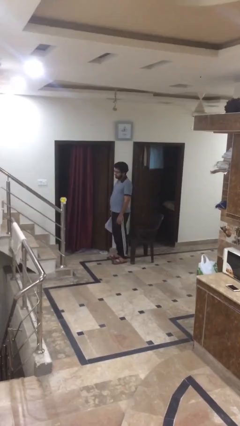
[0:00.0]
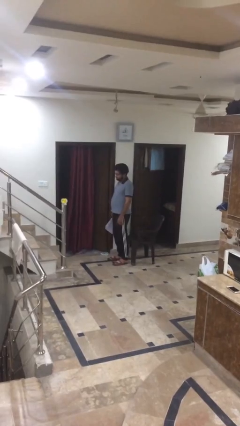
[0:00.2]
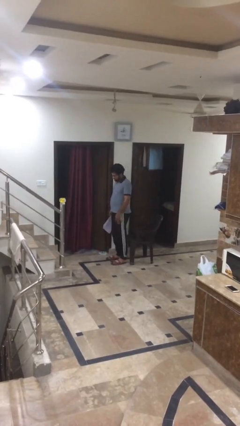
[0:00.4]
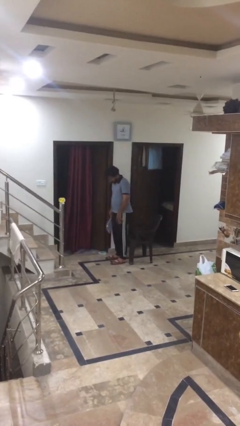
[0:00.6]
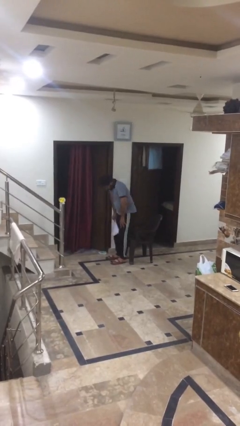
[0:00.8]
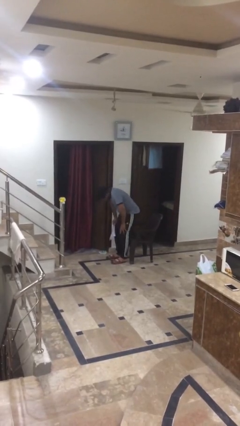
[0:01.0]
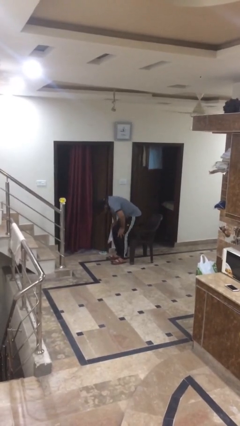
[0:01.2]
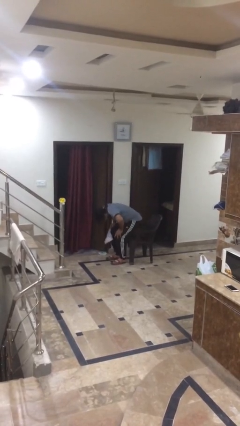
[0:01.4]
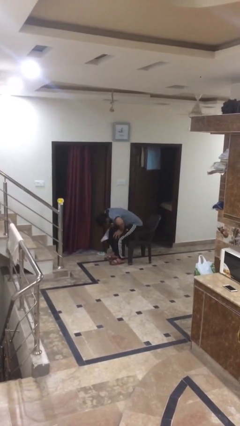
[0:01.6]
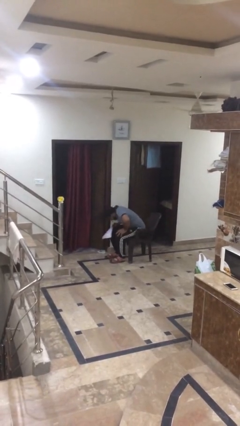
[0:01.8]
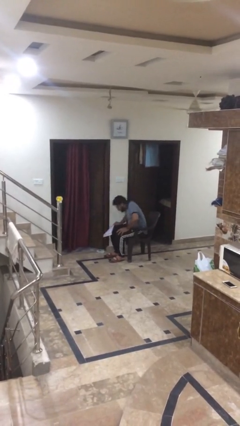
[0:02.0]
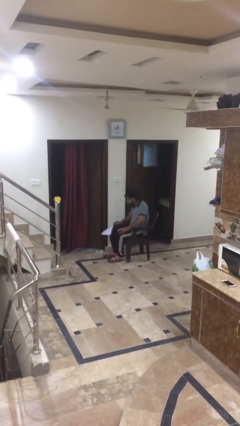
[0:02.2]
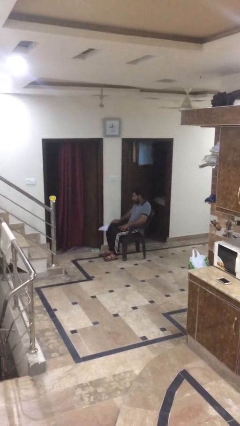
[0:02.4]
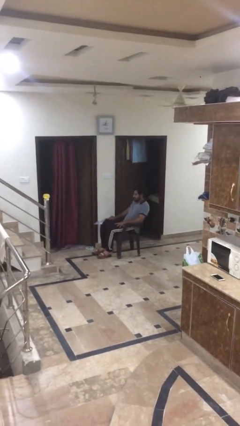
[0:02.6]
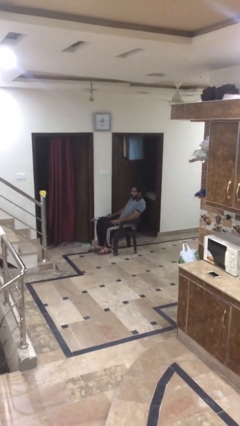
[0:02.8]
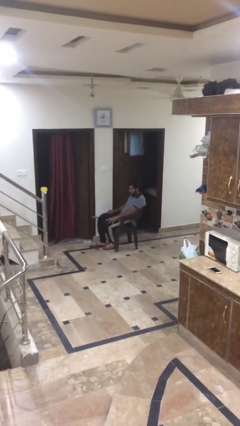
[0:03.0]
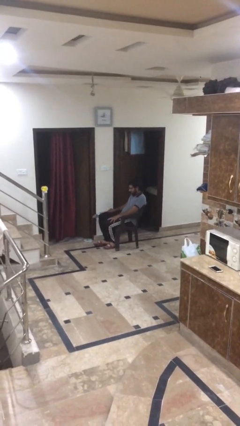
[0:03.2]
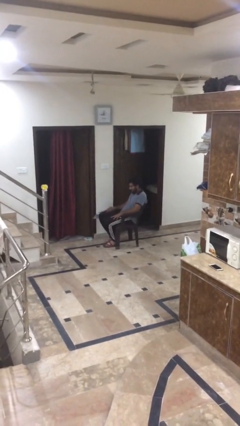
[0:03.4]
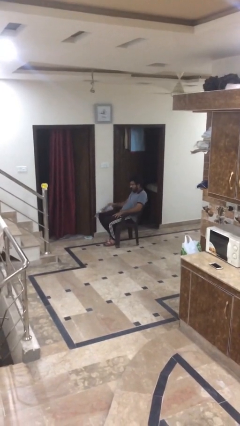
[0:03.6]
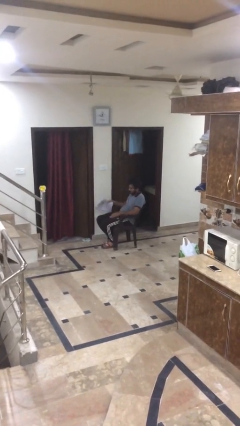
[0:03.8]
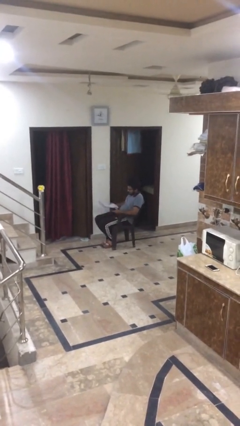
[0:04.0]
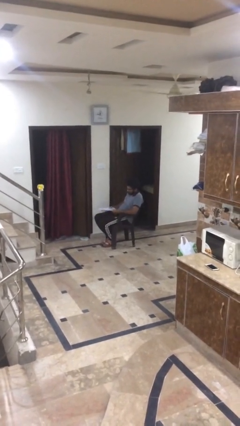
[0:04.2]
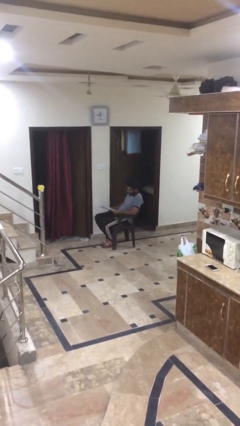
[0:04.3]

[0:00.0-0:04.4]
person sits down

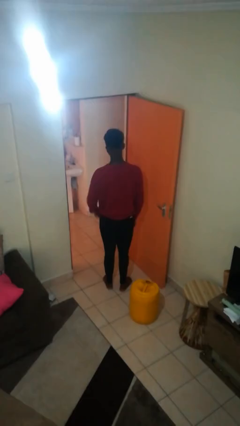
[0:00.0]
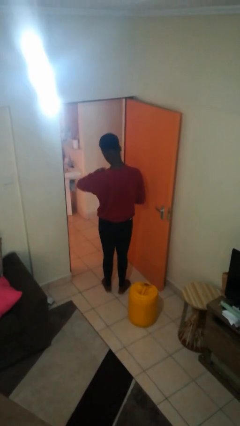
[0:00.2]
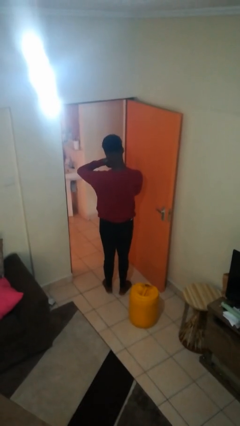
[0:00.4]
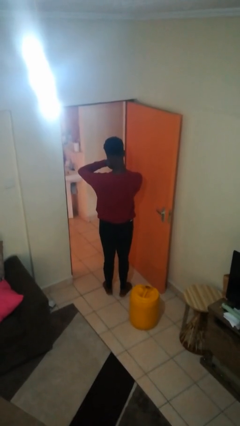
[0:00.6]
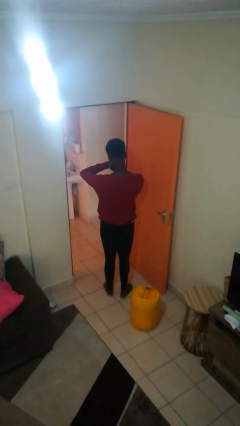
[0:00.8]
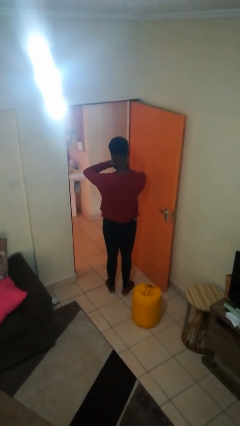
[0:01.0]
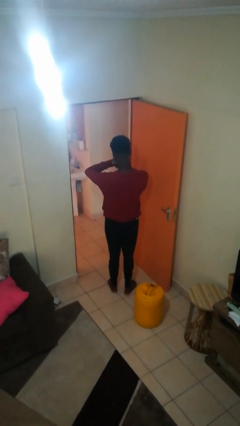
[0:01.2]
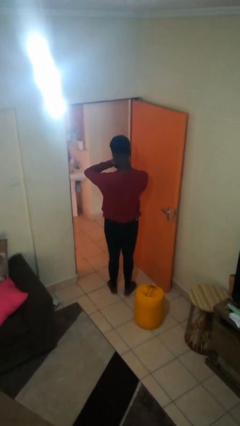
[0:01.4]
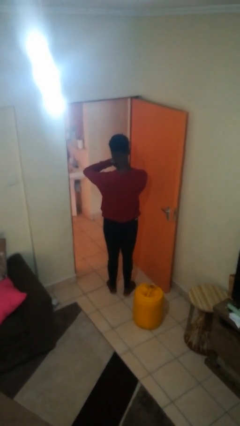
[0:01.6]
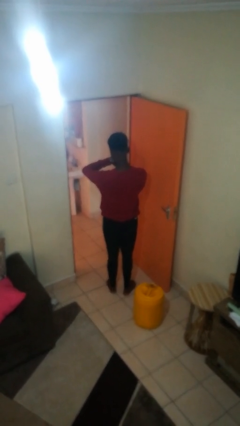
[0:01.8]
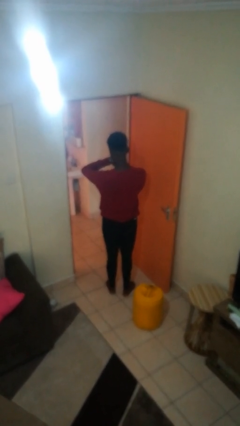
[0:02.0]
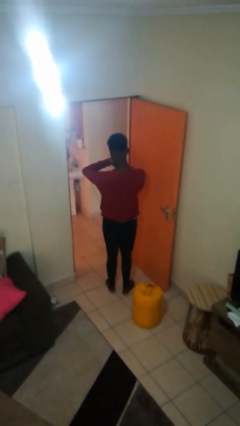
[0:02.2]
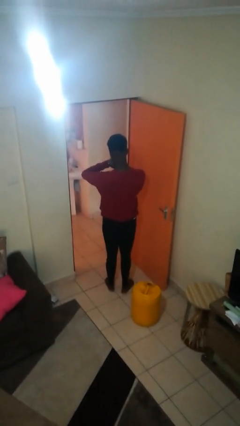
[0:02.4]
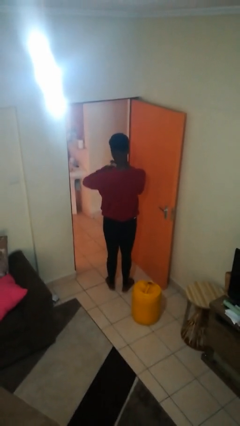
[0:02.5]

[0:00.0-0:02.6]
person looks at wristwatch

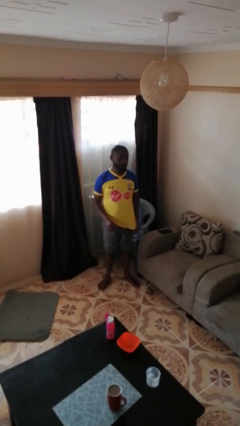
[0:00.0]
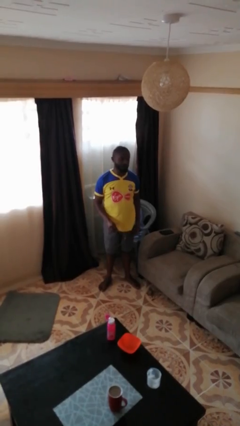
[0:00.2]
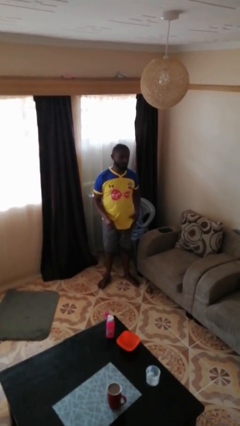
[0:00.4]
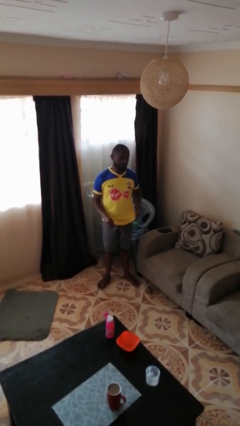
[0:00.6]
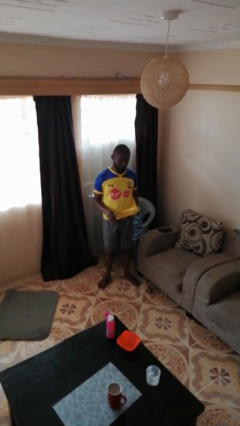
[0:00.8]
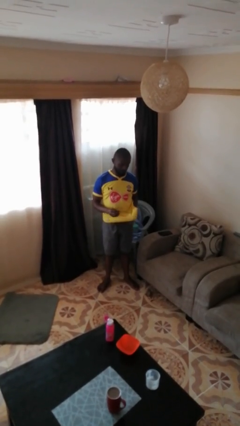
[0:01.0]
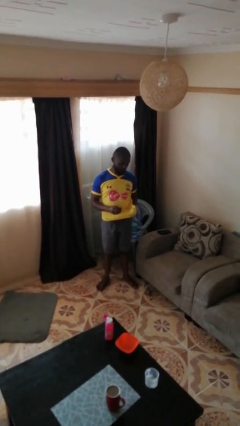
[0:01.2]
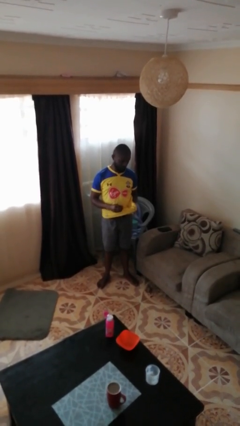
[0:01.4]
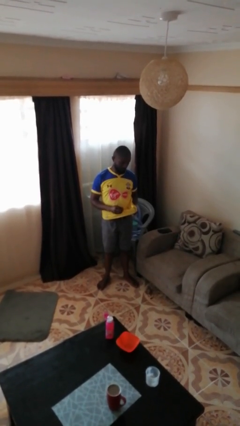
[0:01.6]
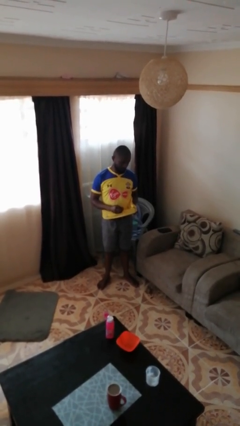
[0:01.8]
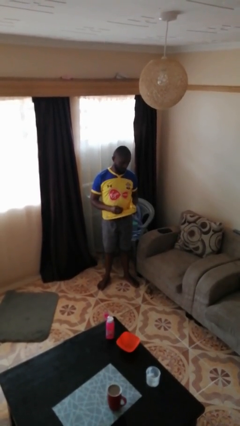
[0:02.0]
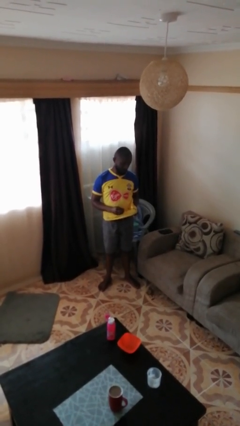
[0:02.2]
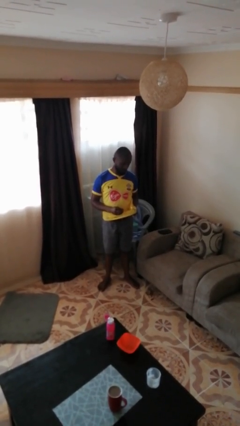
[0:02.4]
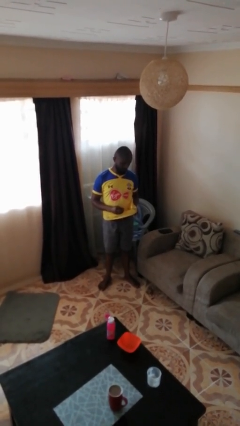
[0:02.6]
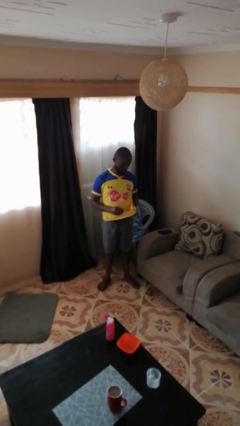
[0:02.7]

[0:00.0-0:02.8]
person cleans eyeglasses

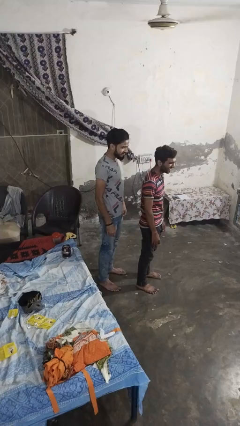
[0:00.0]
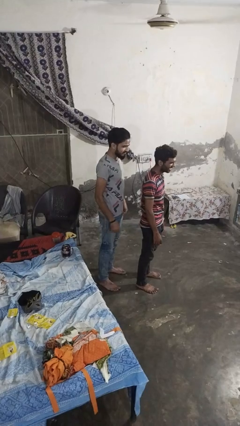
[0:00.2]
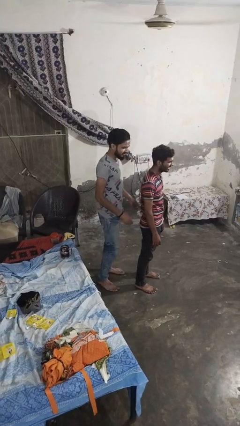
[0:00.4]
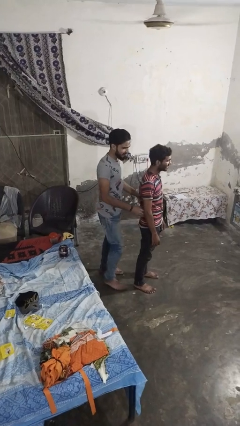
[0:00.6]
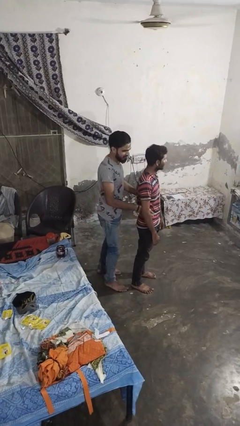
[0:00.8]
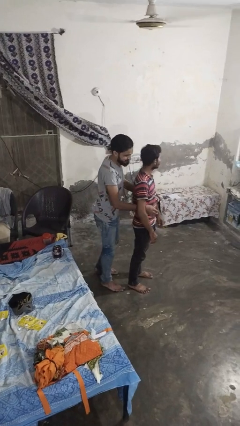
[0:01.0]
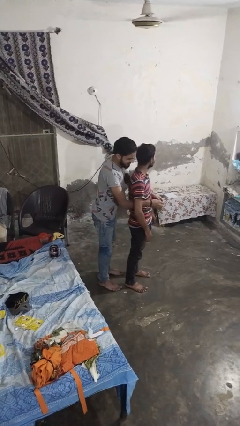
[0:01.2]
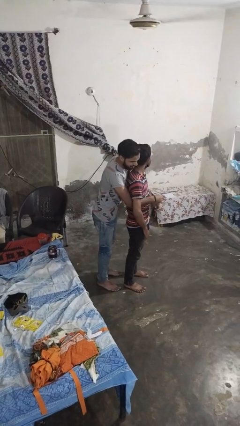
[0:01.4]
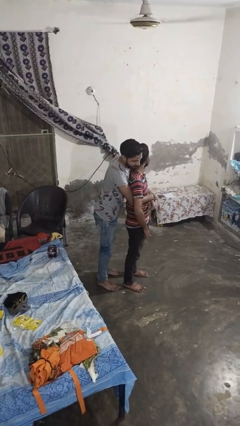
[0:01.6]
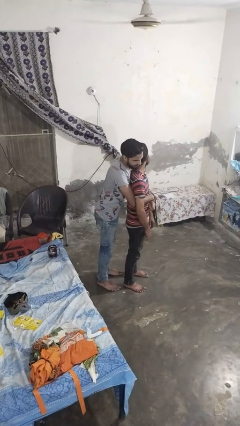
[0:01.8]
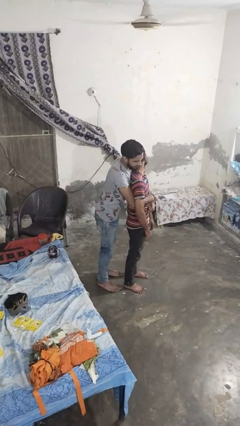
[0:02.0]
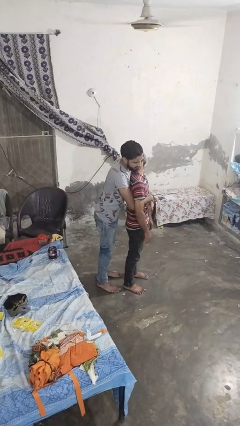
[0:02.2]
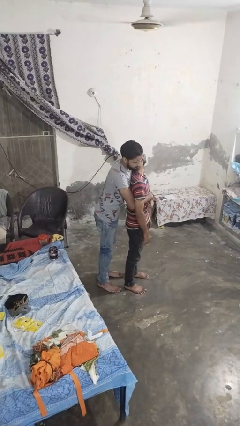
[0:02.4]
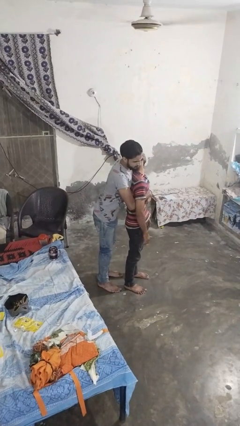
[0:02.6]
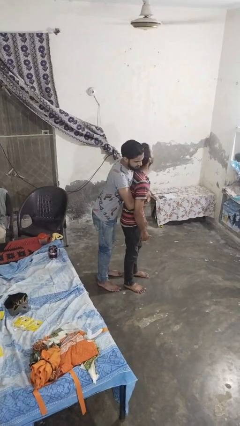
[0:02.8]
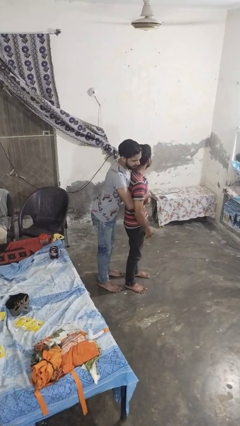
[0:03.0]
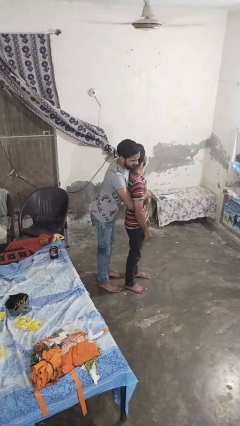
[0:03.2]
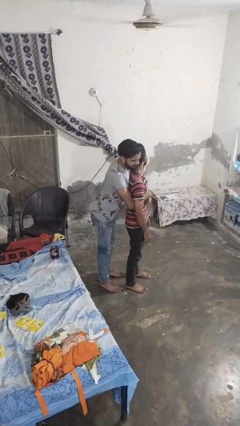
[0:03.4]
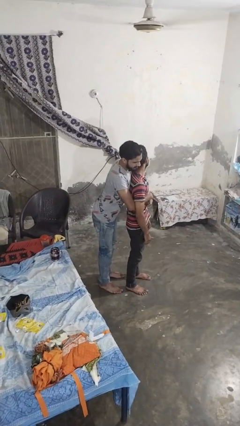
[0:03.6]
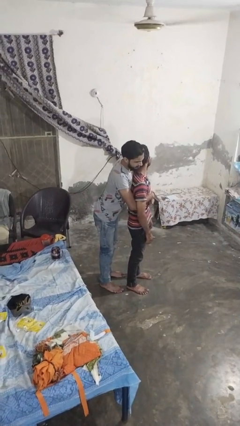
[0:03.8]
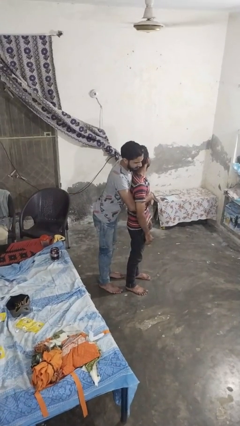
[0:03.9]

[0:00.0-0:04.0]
person hugs person from behind

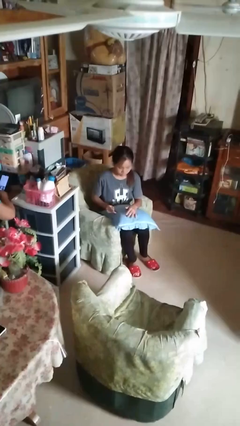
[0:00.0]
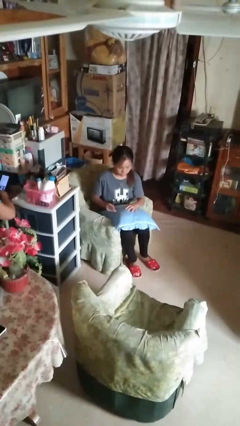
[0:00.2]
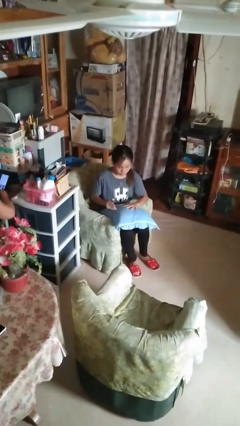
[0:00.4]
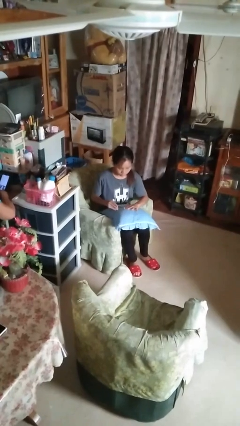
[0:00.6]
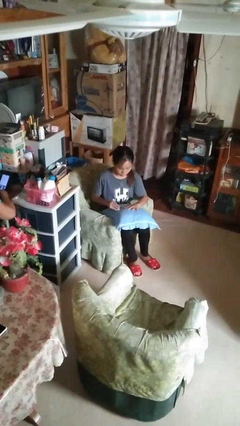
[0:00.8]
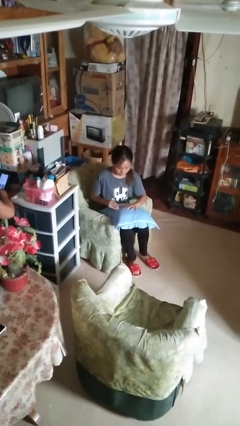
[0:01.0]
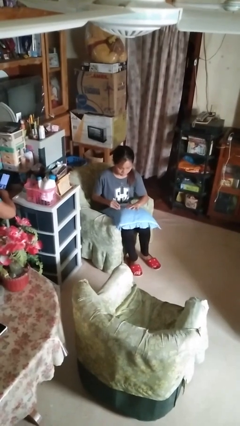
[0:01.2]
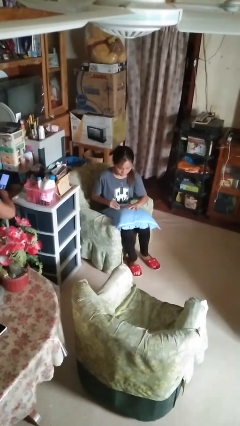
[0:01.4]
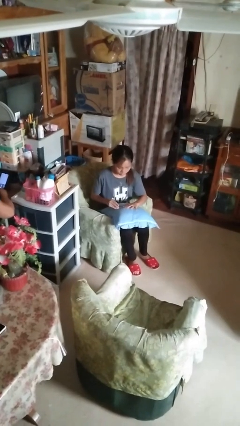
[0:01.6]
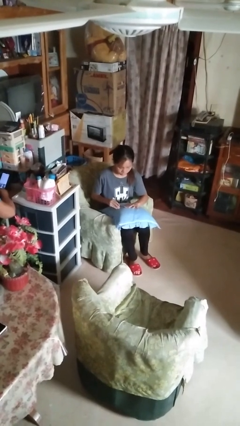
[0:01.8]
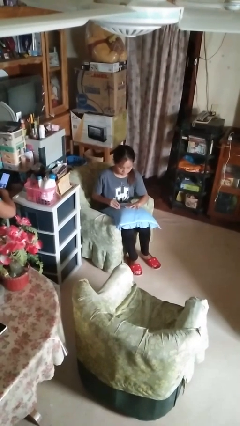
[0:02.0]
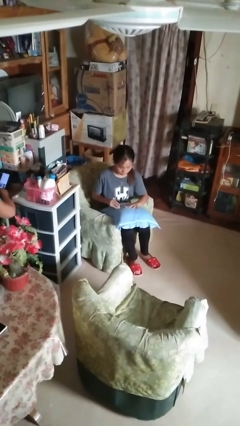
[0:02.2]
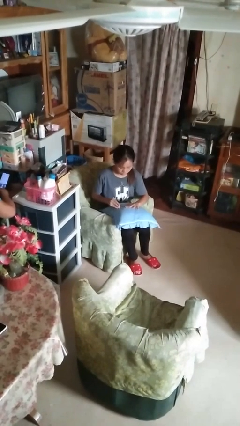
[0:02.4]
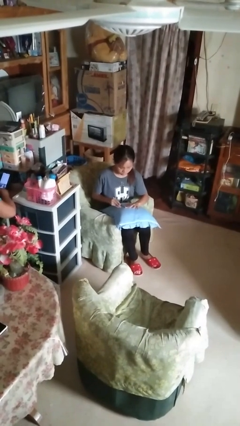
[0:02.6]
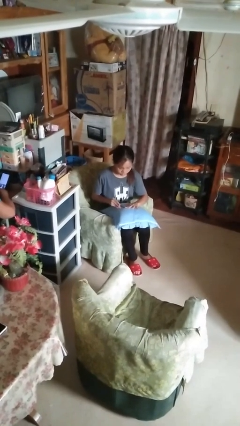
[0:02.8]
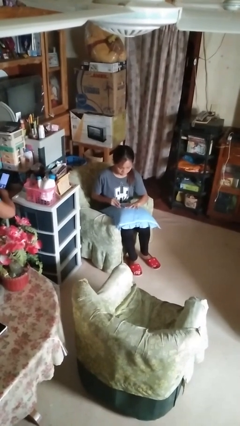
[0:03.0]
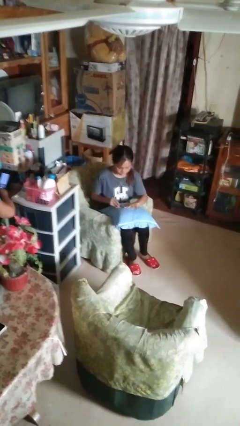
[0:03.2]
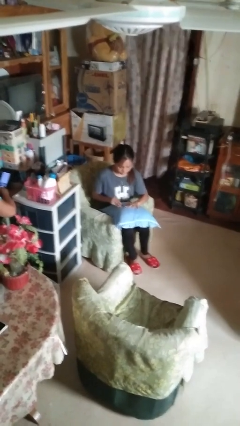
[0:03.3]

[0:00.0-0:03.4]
person files fingernails

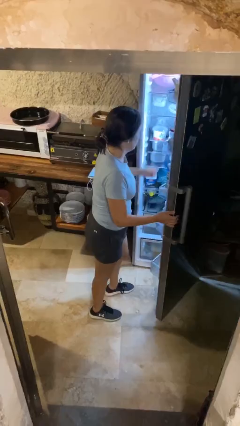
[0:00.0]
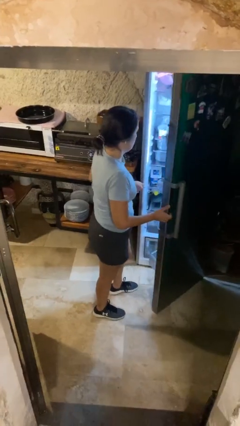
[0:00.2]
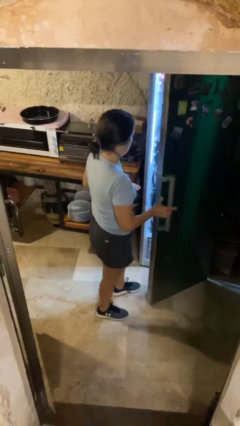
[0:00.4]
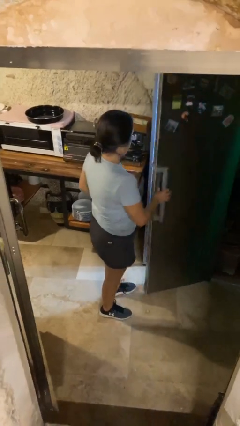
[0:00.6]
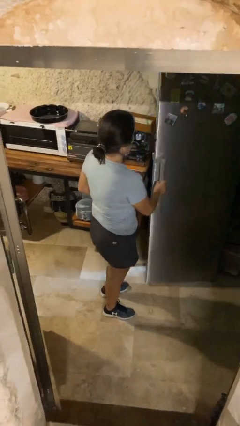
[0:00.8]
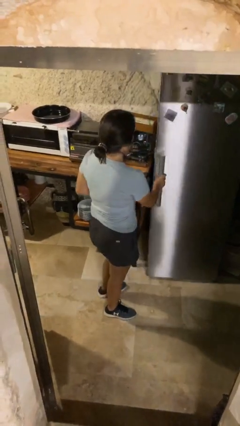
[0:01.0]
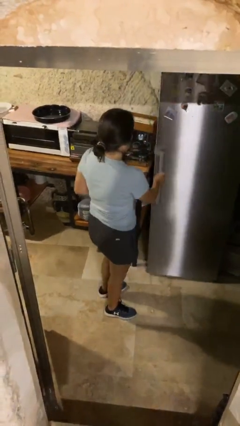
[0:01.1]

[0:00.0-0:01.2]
person closes refrigerator
